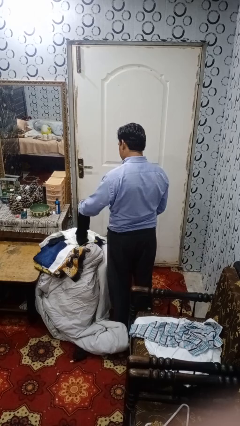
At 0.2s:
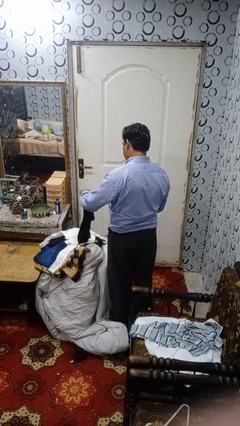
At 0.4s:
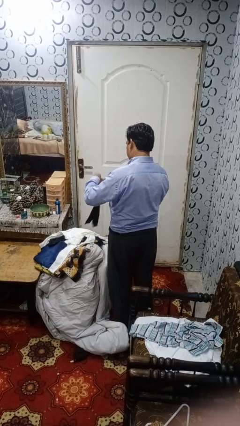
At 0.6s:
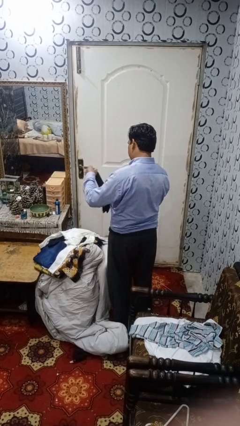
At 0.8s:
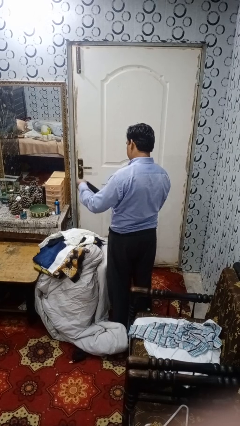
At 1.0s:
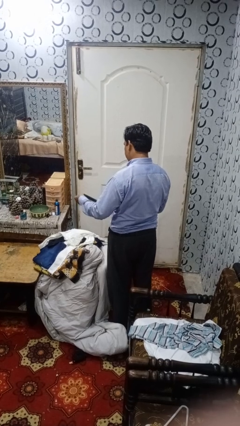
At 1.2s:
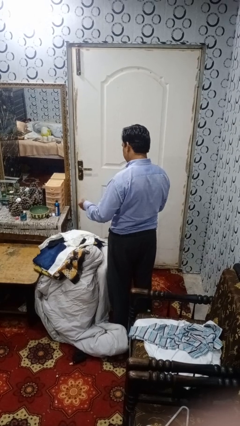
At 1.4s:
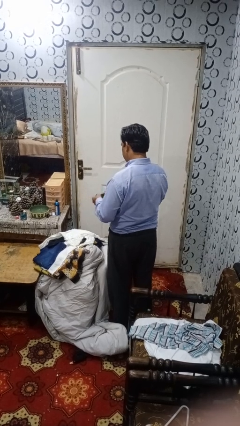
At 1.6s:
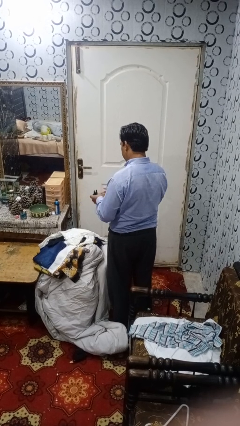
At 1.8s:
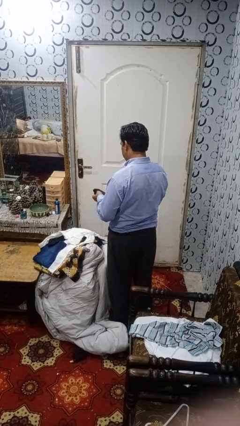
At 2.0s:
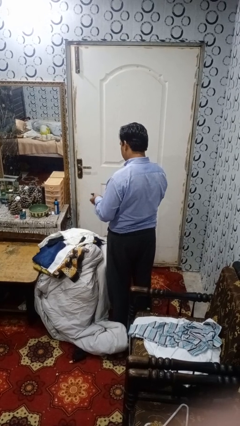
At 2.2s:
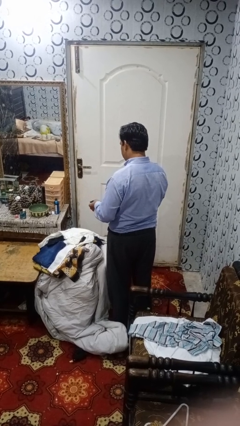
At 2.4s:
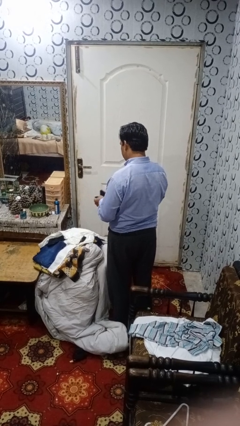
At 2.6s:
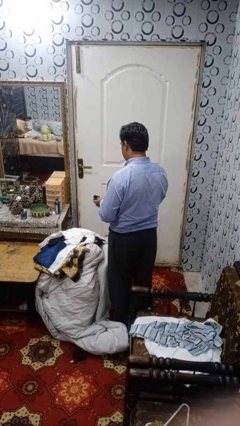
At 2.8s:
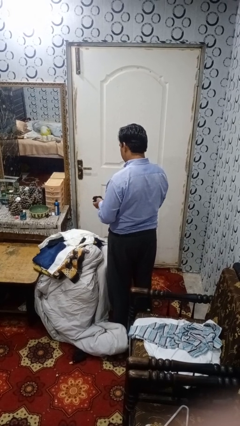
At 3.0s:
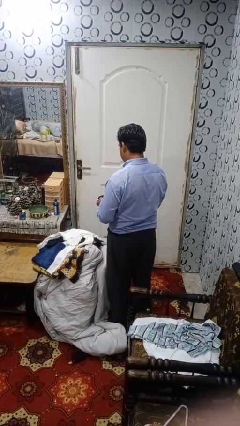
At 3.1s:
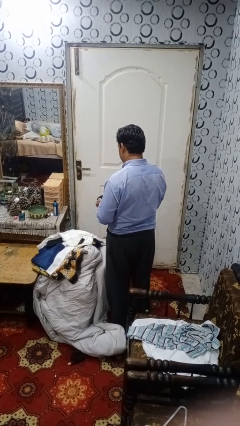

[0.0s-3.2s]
person folds socks

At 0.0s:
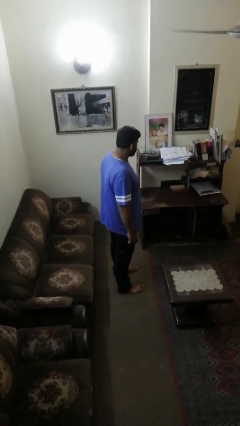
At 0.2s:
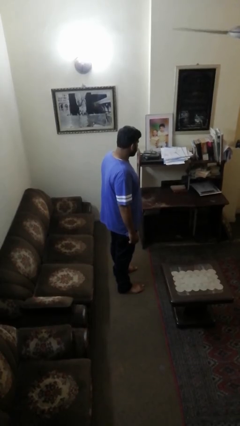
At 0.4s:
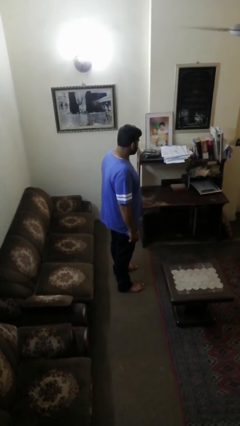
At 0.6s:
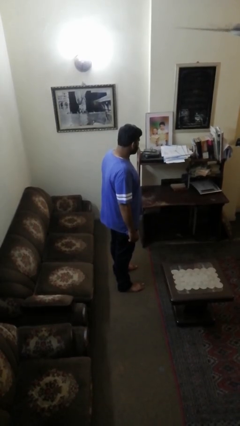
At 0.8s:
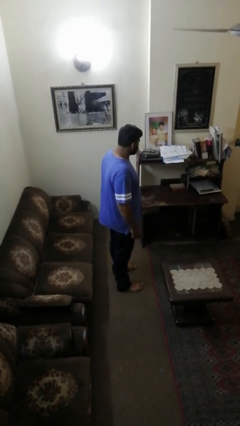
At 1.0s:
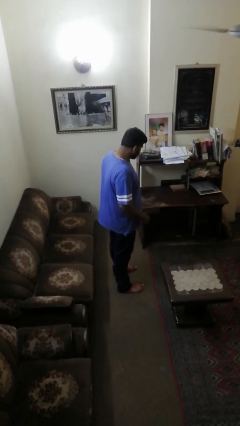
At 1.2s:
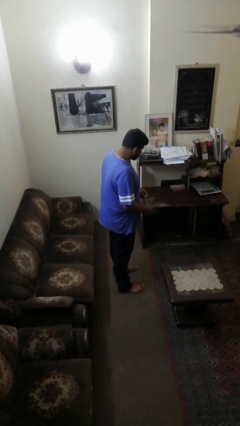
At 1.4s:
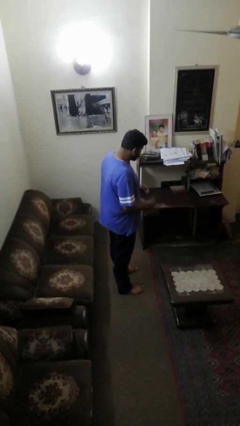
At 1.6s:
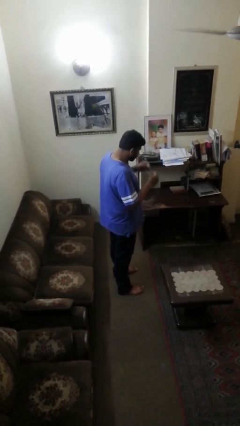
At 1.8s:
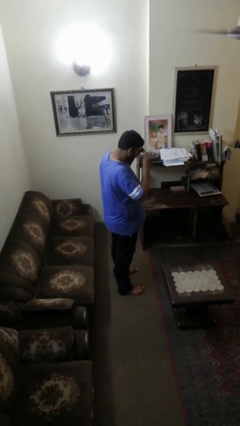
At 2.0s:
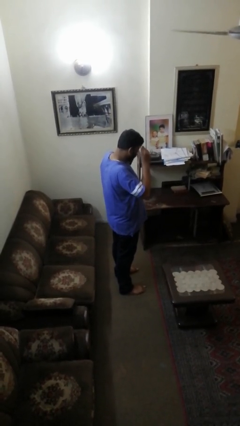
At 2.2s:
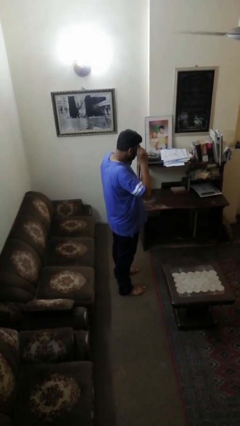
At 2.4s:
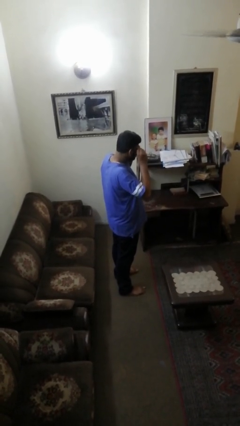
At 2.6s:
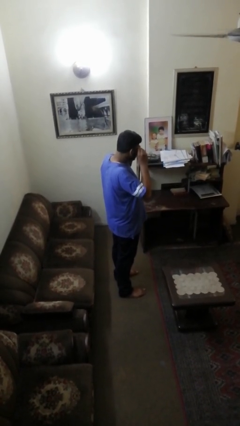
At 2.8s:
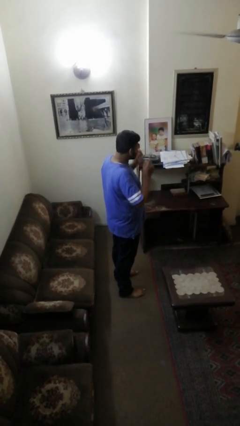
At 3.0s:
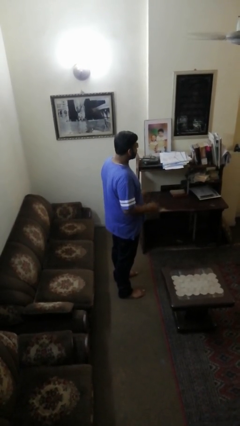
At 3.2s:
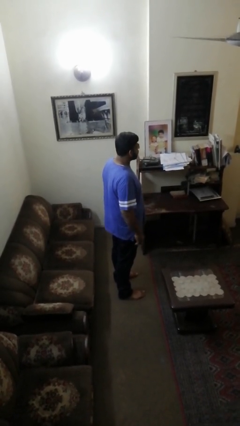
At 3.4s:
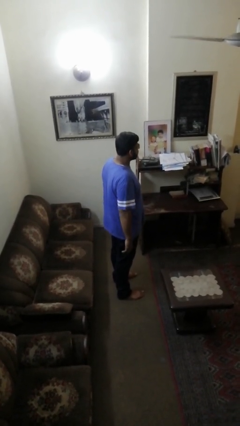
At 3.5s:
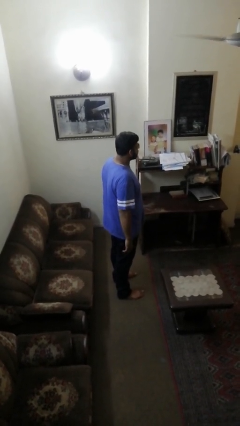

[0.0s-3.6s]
person puts on sunglasses

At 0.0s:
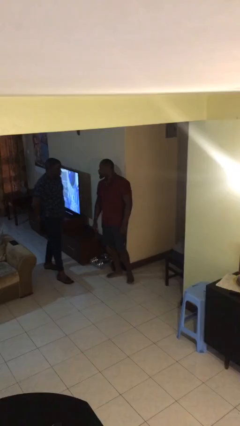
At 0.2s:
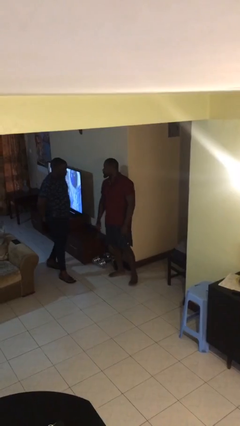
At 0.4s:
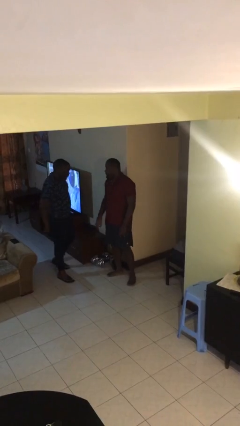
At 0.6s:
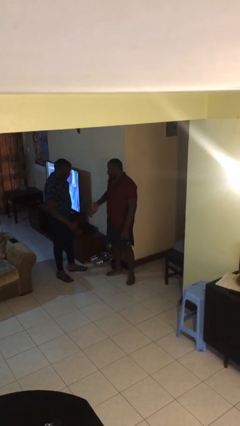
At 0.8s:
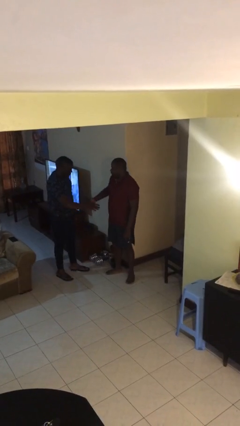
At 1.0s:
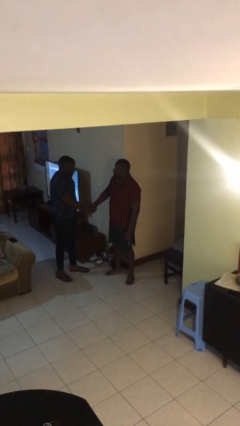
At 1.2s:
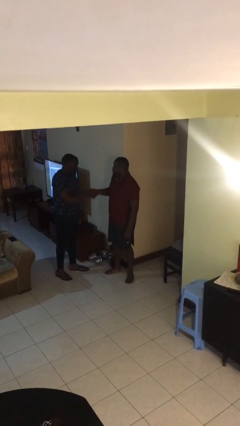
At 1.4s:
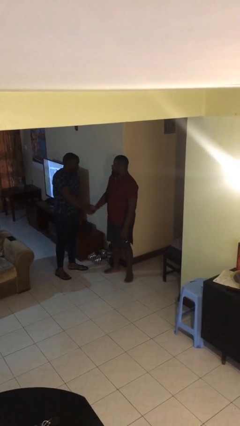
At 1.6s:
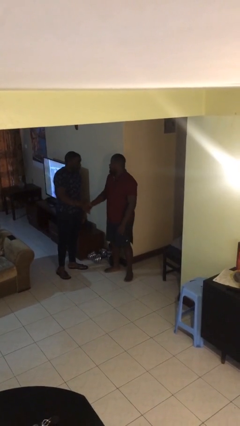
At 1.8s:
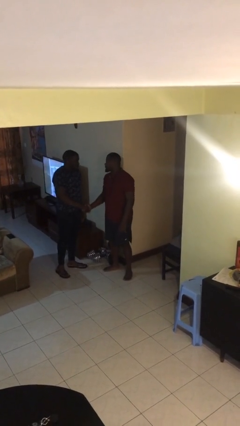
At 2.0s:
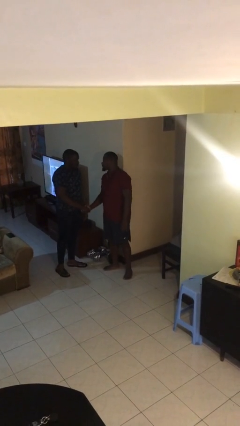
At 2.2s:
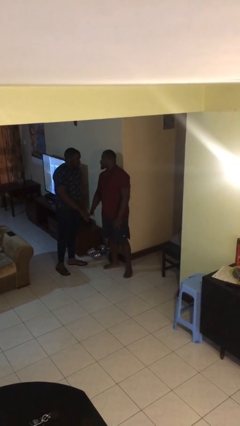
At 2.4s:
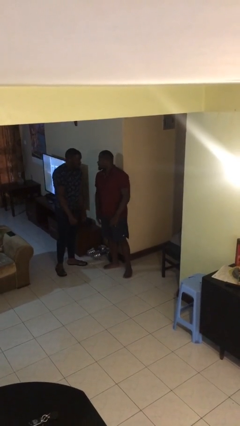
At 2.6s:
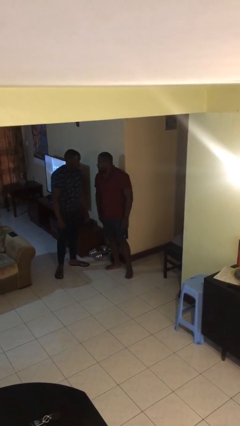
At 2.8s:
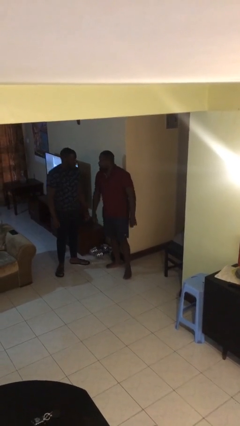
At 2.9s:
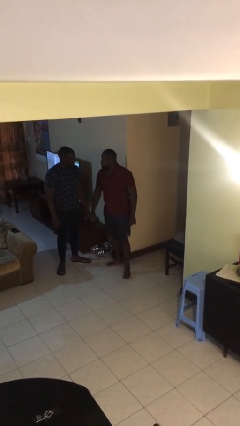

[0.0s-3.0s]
person shakes hand

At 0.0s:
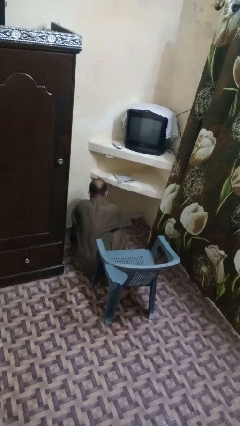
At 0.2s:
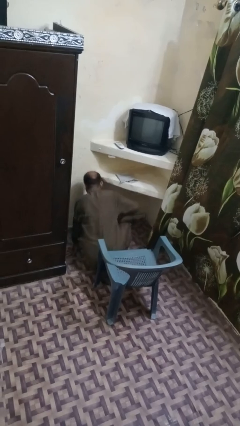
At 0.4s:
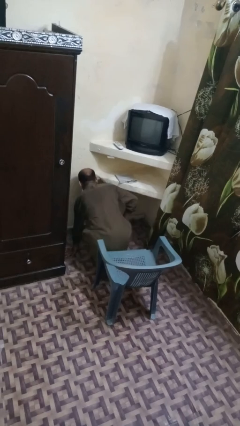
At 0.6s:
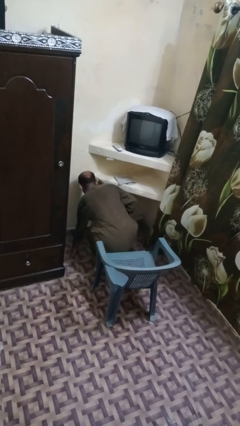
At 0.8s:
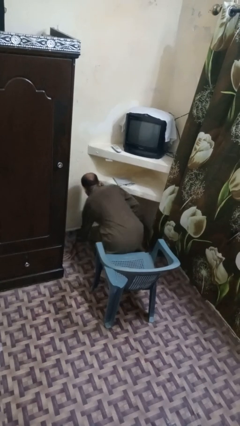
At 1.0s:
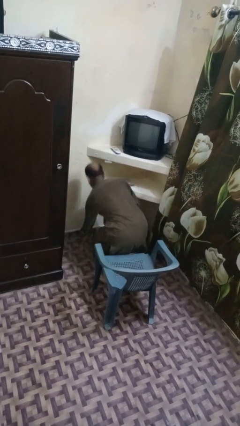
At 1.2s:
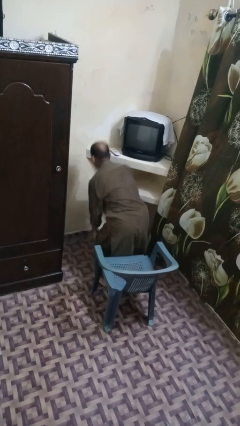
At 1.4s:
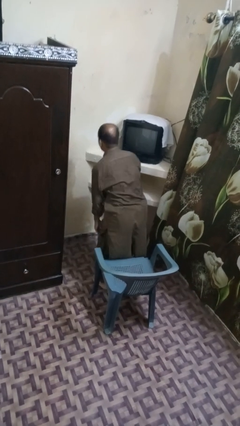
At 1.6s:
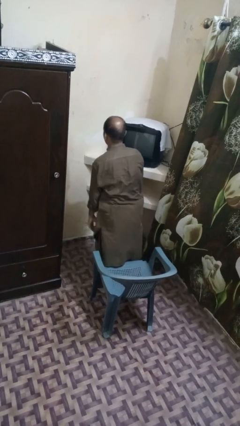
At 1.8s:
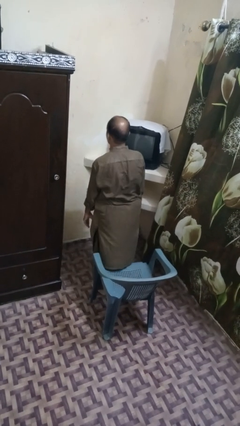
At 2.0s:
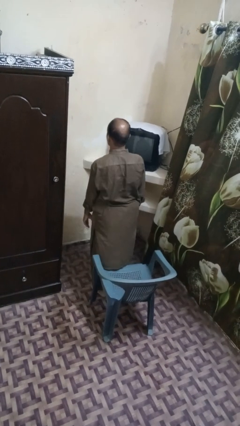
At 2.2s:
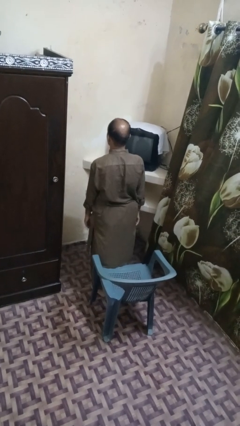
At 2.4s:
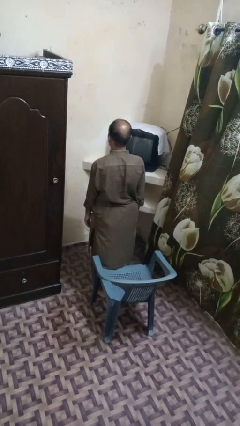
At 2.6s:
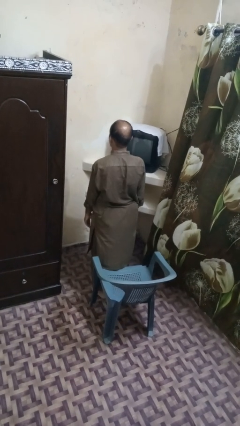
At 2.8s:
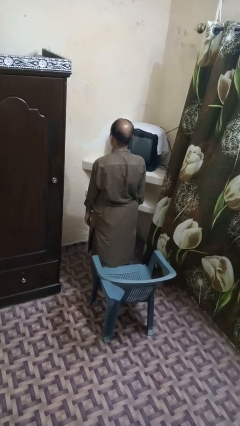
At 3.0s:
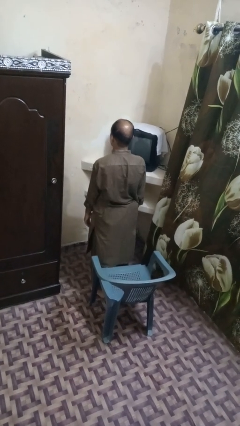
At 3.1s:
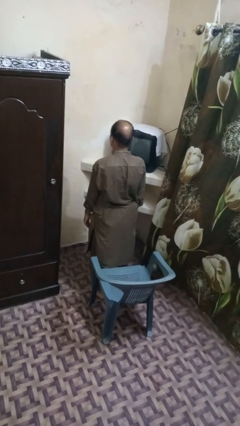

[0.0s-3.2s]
person stands up from floor

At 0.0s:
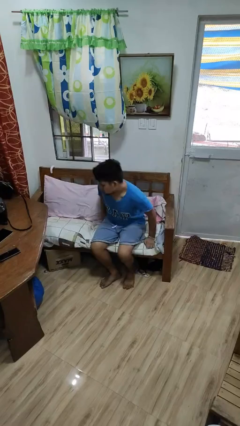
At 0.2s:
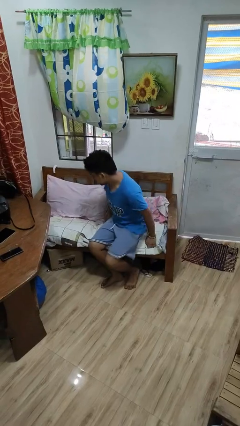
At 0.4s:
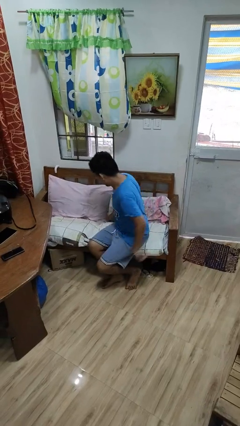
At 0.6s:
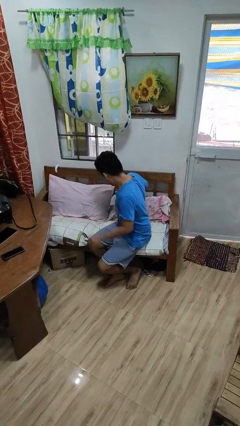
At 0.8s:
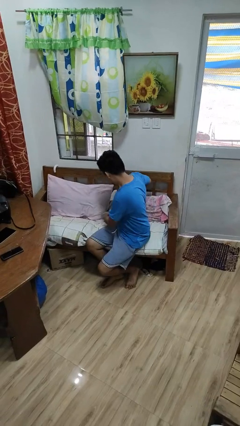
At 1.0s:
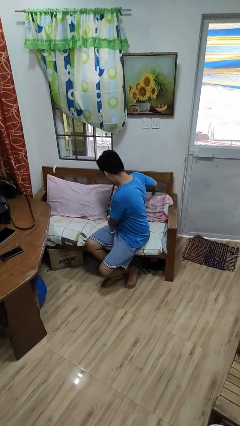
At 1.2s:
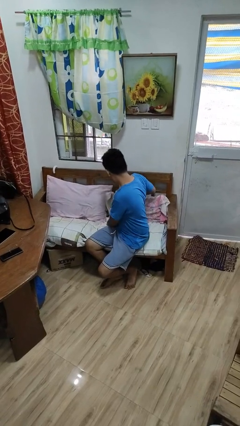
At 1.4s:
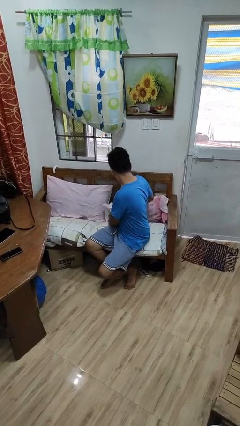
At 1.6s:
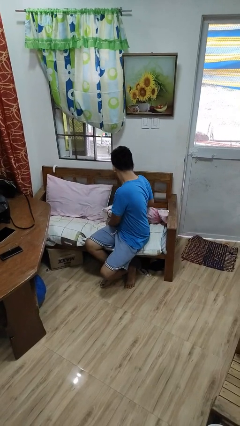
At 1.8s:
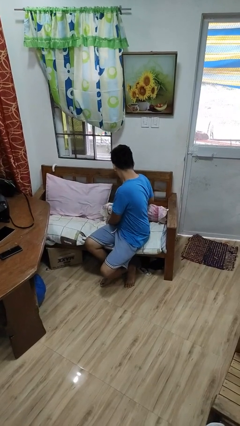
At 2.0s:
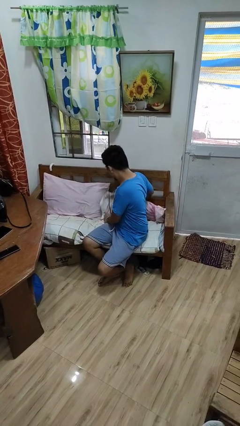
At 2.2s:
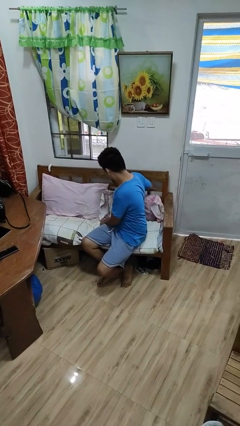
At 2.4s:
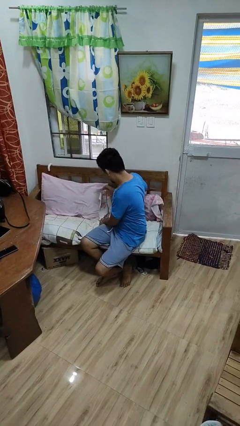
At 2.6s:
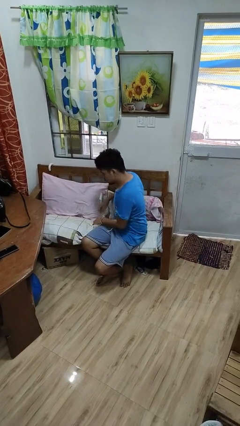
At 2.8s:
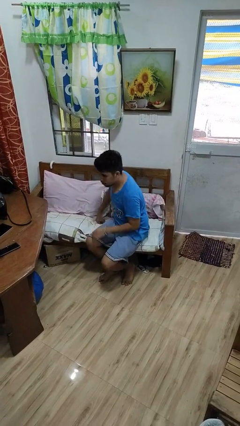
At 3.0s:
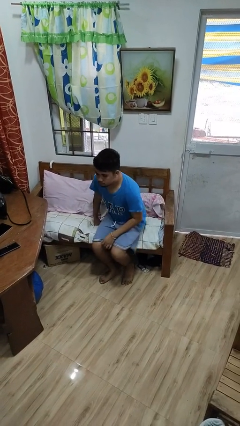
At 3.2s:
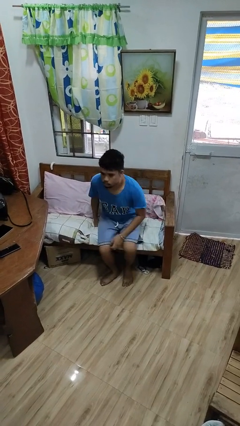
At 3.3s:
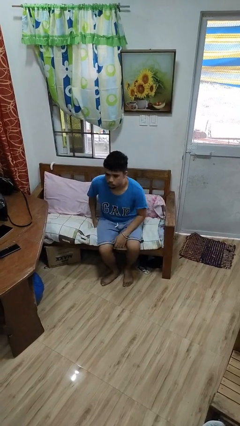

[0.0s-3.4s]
person searches in couch

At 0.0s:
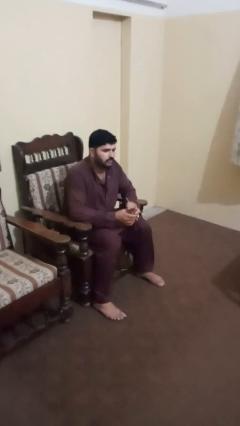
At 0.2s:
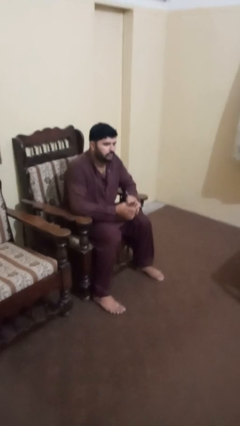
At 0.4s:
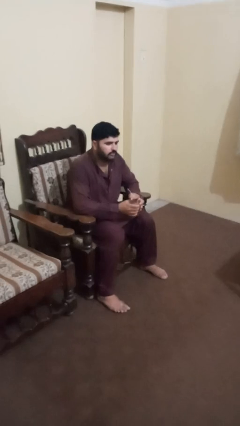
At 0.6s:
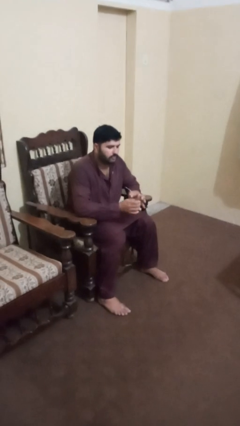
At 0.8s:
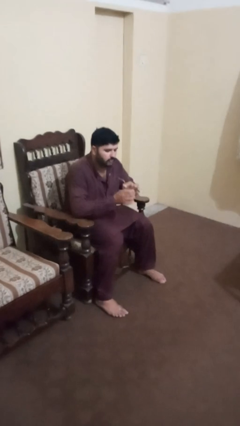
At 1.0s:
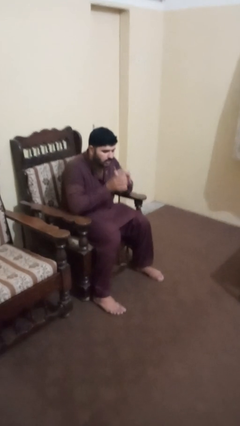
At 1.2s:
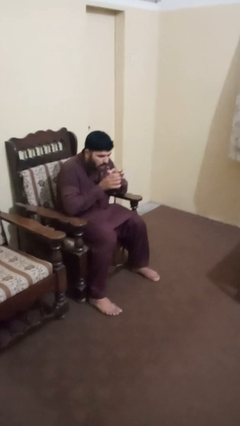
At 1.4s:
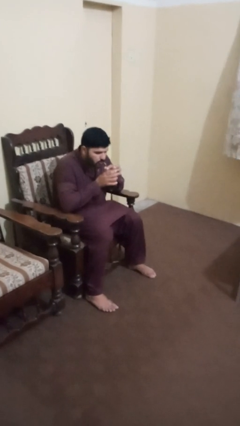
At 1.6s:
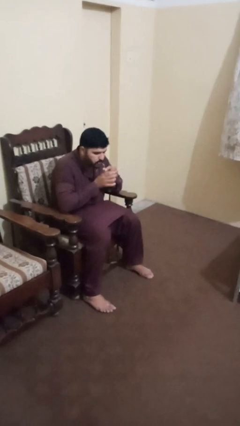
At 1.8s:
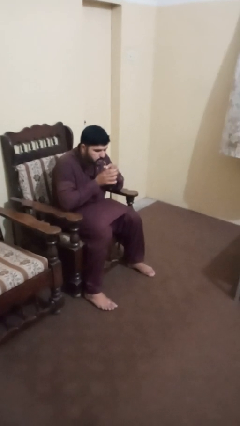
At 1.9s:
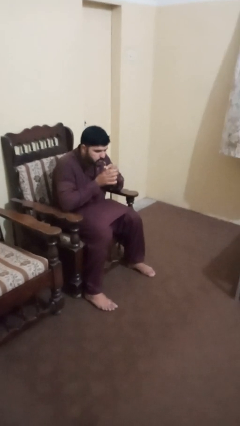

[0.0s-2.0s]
person drinks from straw
